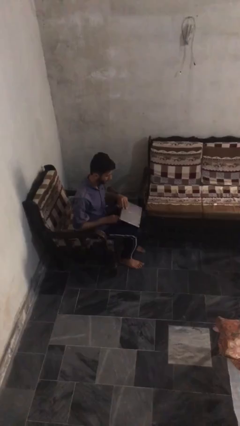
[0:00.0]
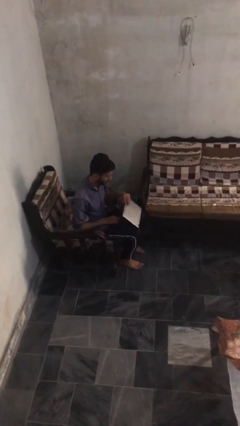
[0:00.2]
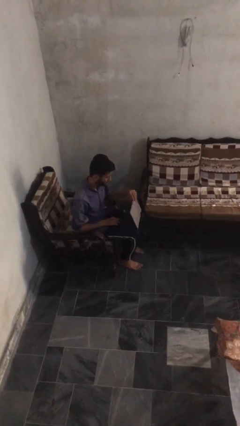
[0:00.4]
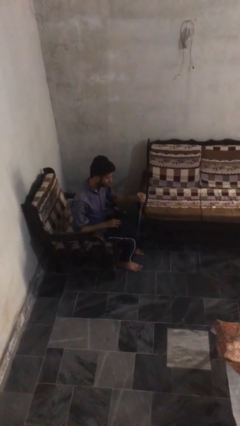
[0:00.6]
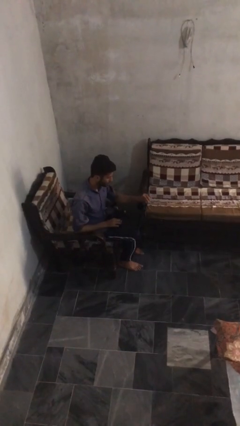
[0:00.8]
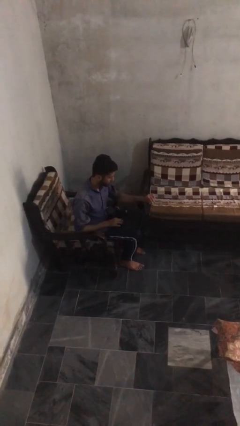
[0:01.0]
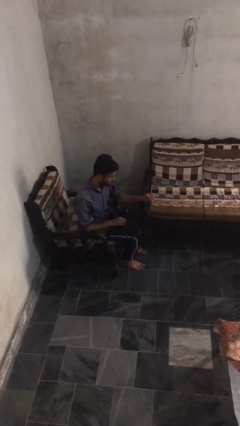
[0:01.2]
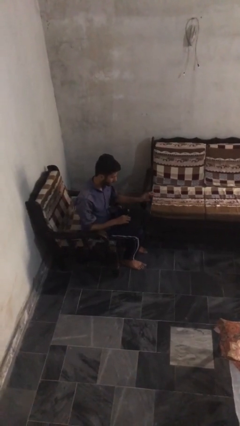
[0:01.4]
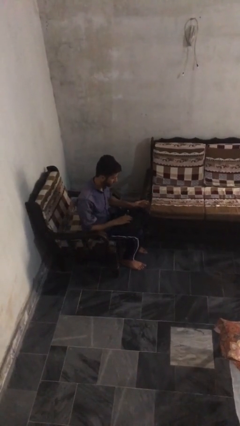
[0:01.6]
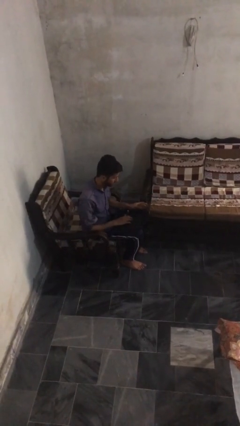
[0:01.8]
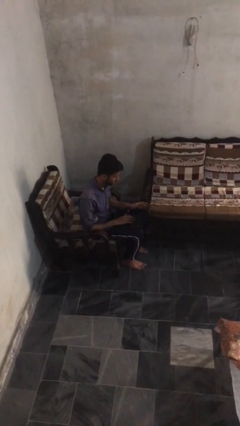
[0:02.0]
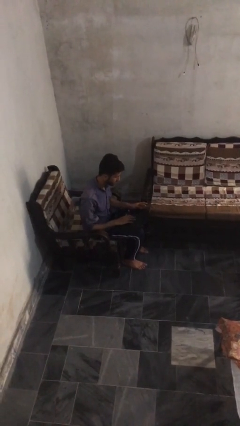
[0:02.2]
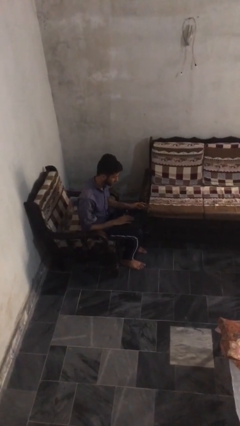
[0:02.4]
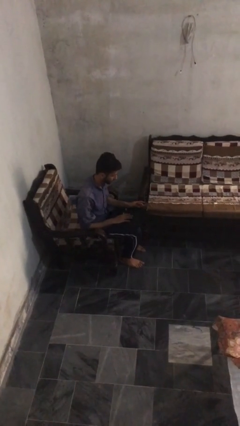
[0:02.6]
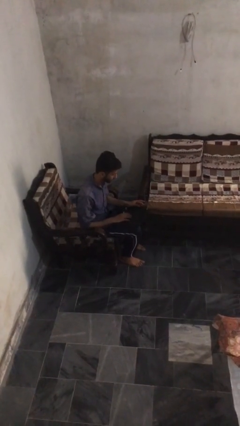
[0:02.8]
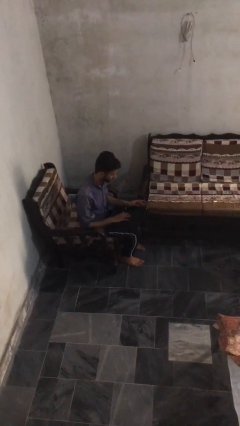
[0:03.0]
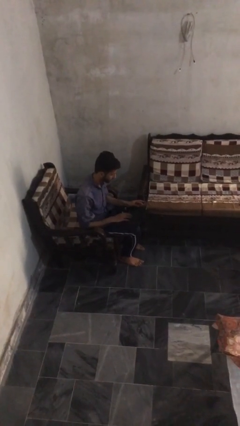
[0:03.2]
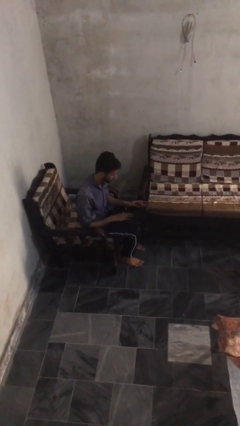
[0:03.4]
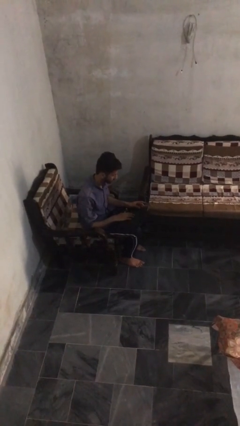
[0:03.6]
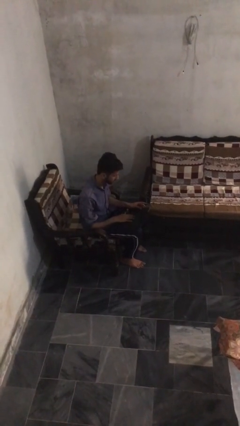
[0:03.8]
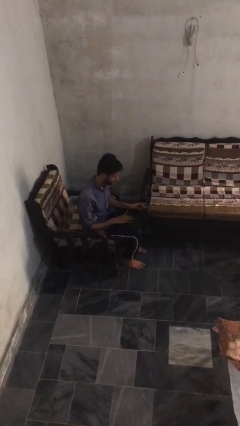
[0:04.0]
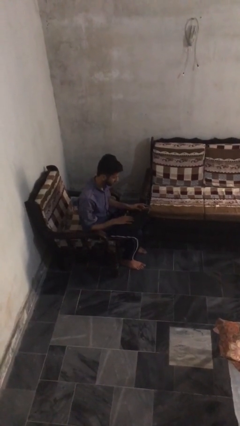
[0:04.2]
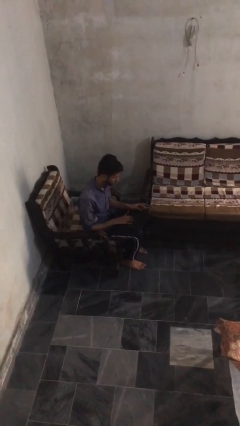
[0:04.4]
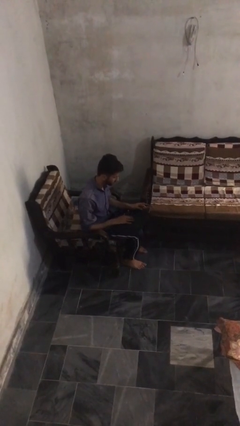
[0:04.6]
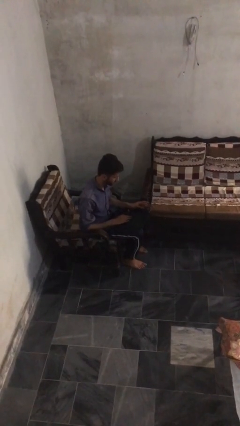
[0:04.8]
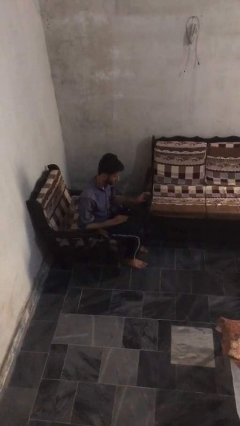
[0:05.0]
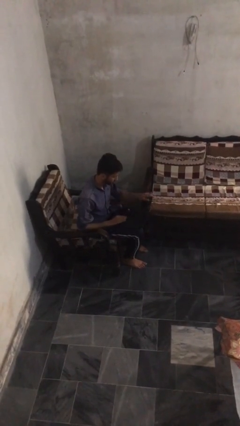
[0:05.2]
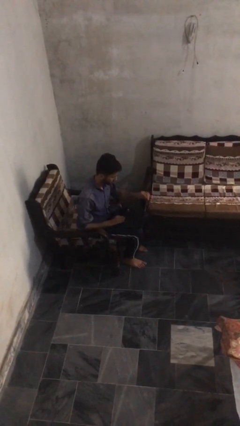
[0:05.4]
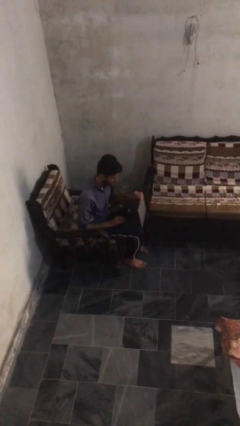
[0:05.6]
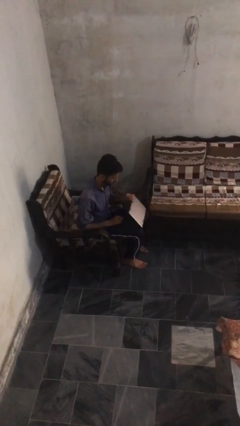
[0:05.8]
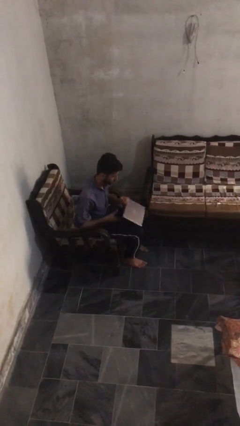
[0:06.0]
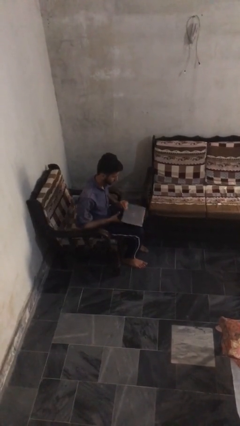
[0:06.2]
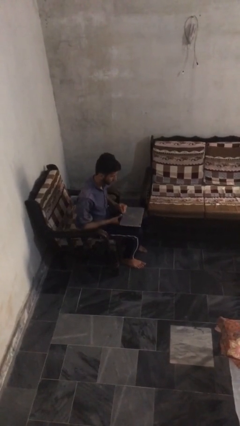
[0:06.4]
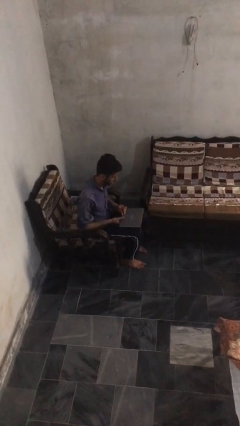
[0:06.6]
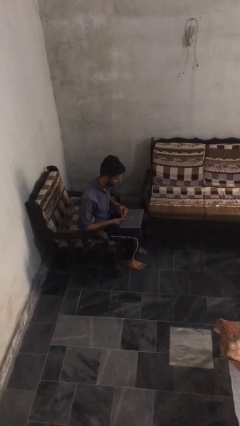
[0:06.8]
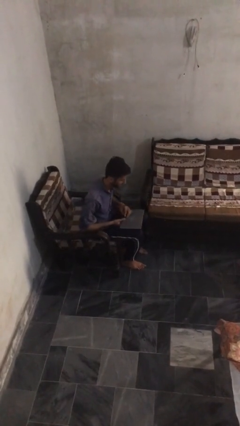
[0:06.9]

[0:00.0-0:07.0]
person interacts with laptop

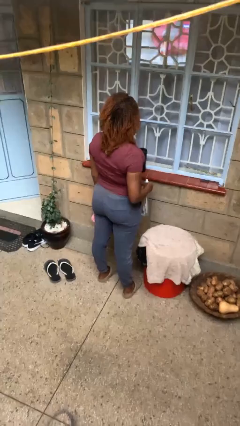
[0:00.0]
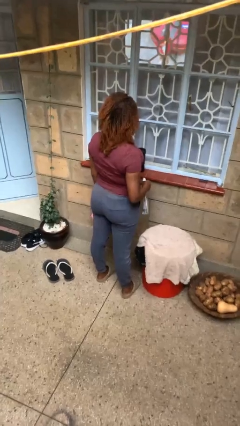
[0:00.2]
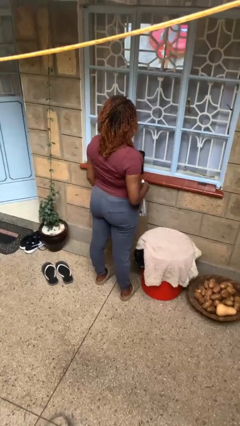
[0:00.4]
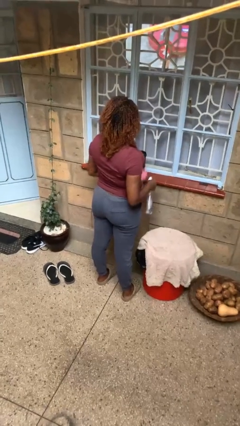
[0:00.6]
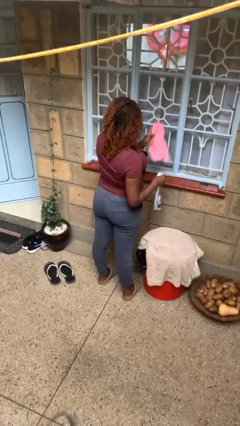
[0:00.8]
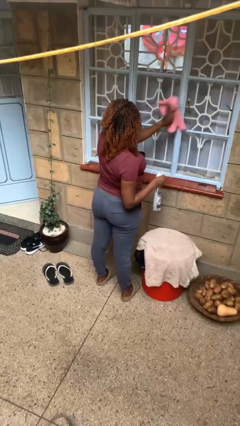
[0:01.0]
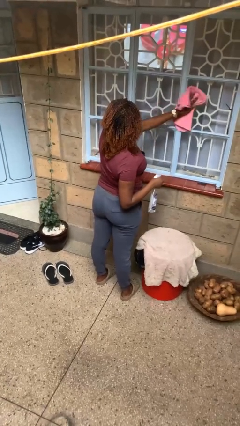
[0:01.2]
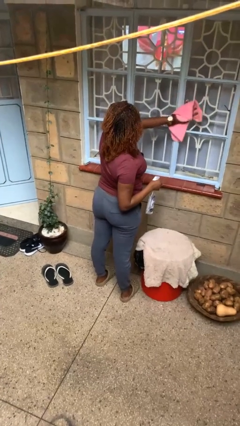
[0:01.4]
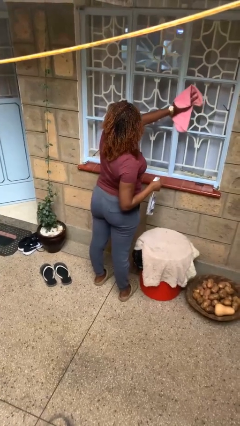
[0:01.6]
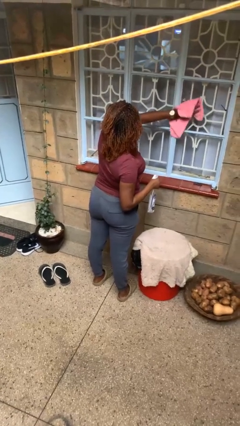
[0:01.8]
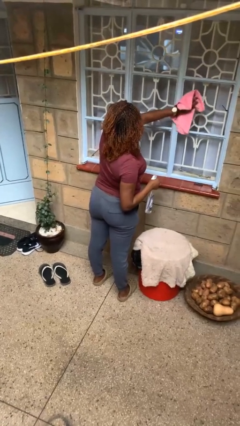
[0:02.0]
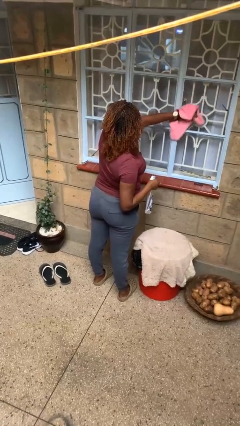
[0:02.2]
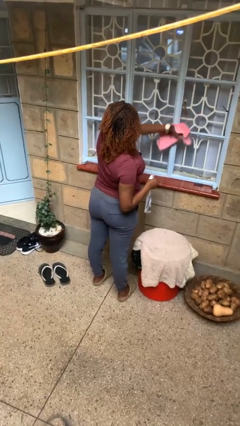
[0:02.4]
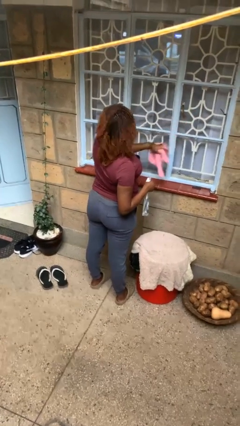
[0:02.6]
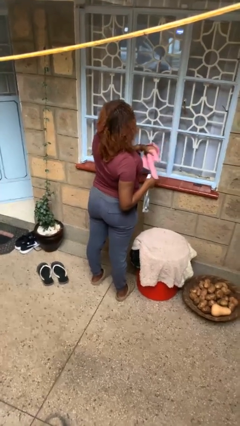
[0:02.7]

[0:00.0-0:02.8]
person washes window

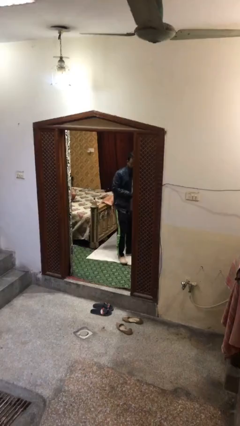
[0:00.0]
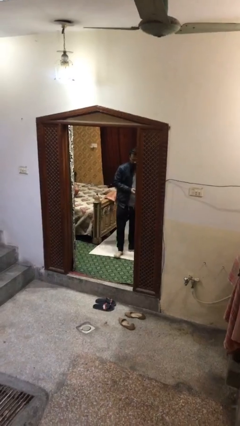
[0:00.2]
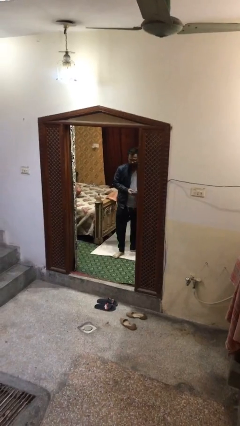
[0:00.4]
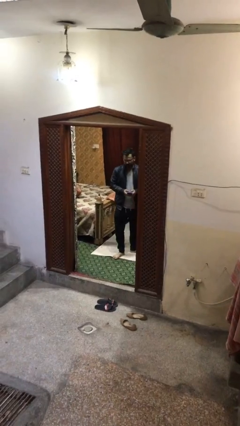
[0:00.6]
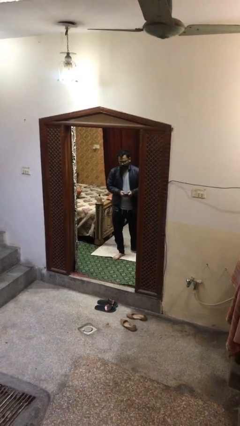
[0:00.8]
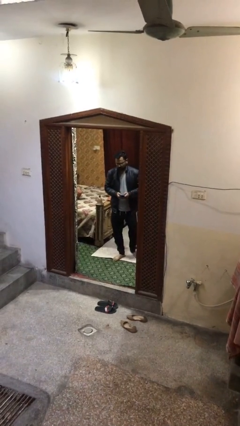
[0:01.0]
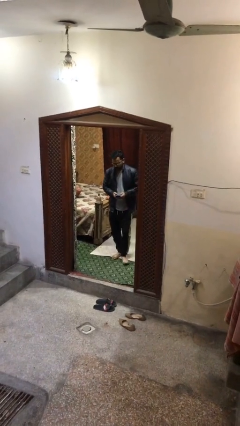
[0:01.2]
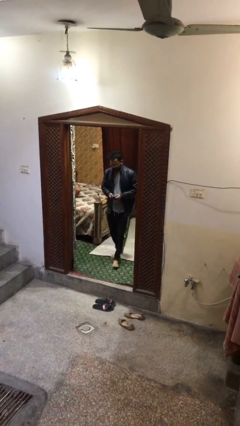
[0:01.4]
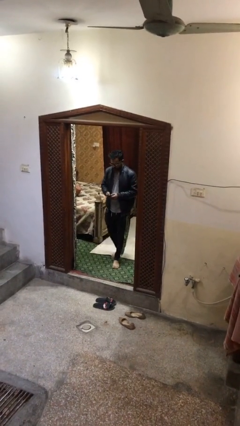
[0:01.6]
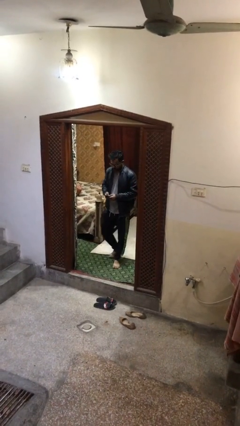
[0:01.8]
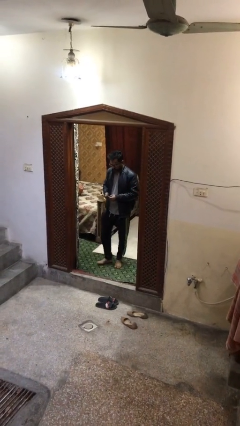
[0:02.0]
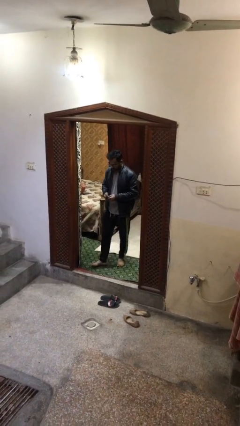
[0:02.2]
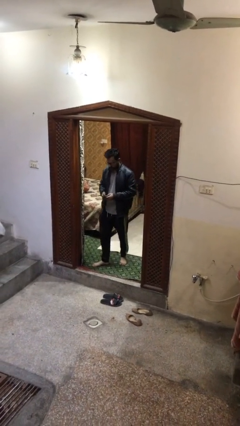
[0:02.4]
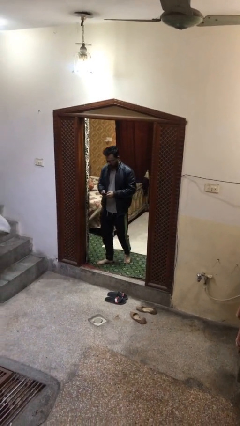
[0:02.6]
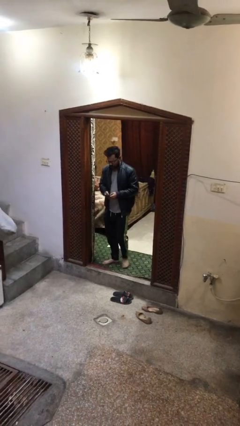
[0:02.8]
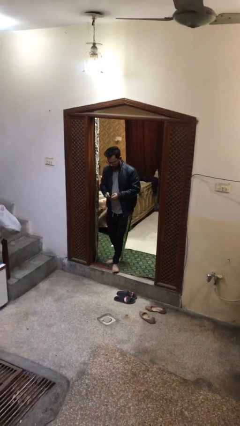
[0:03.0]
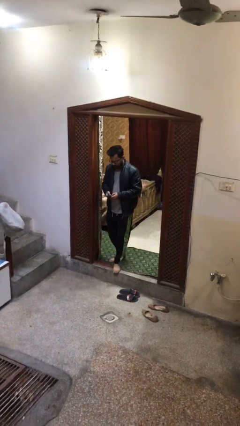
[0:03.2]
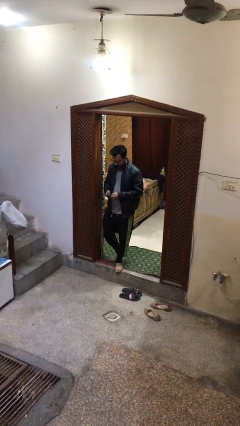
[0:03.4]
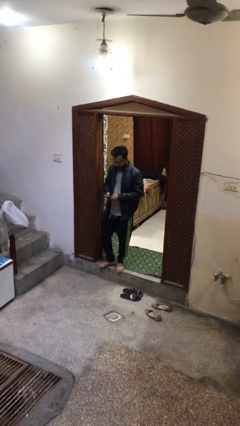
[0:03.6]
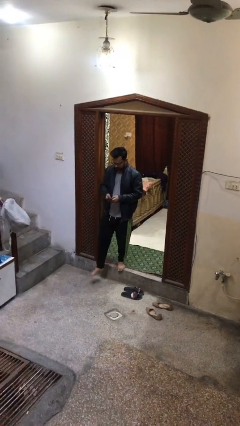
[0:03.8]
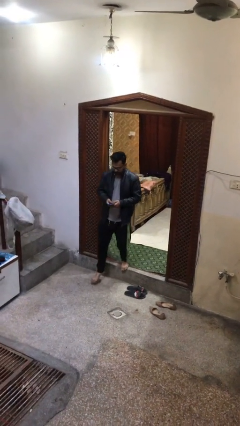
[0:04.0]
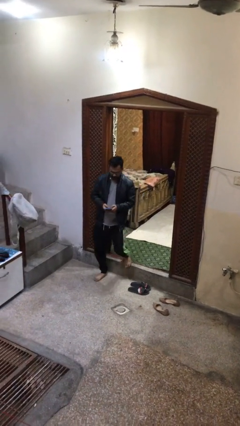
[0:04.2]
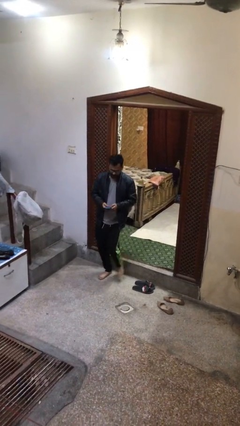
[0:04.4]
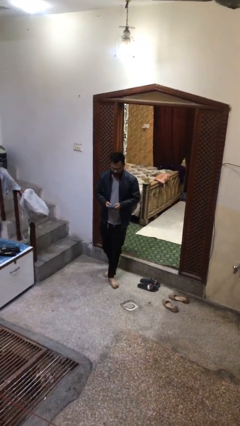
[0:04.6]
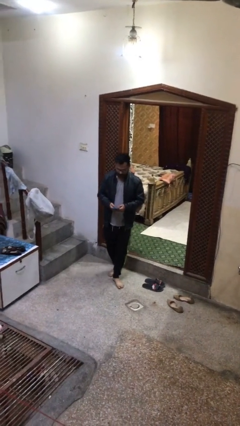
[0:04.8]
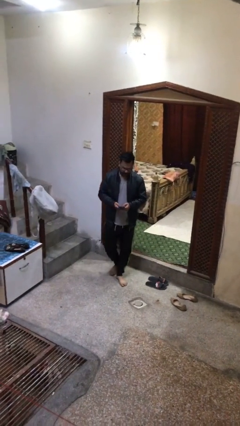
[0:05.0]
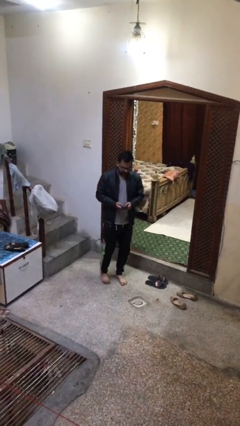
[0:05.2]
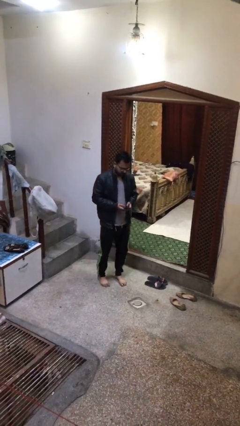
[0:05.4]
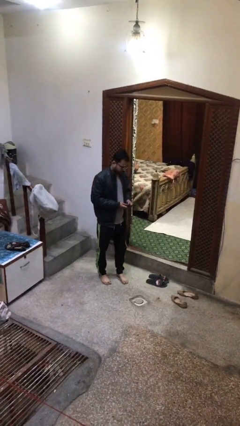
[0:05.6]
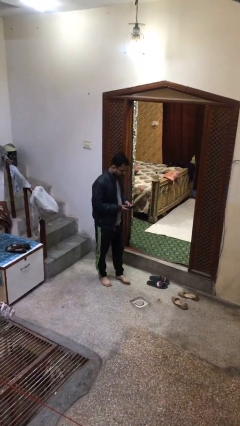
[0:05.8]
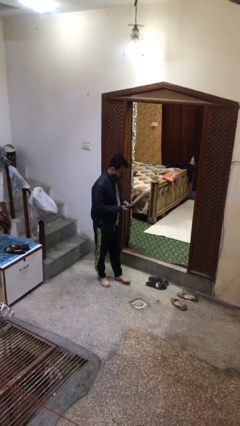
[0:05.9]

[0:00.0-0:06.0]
person enters scene through structure

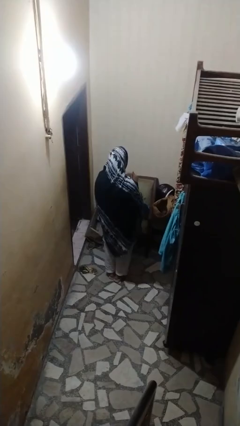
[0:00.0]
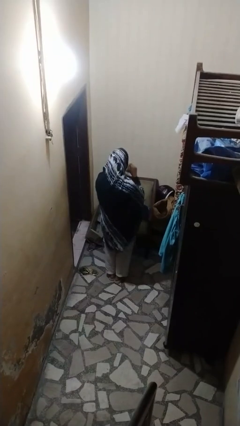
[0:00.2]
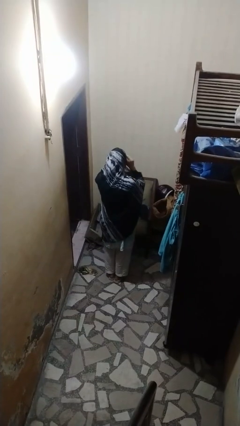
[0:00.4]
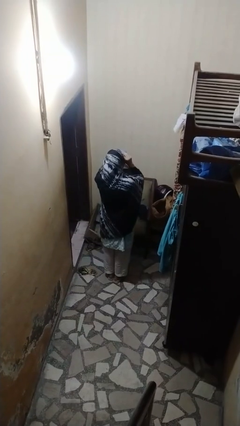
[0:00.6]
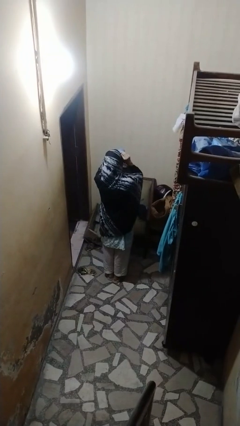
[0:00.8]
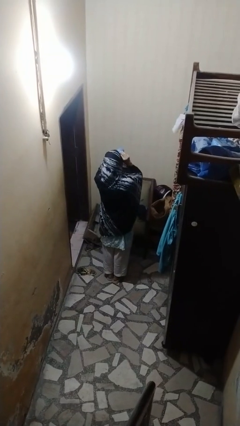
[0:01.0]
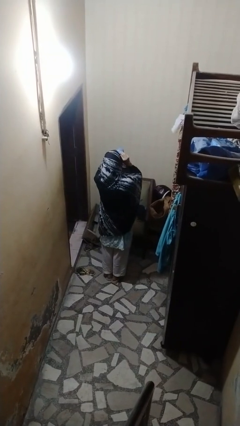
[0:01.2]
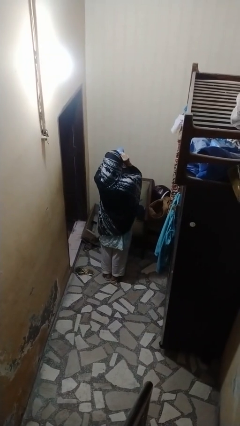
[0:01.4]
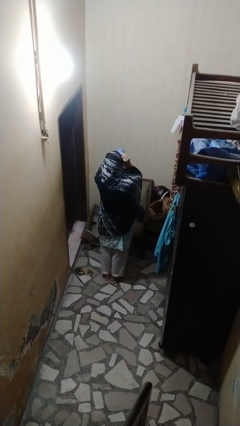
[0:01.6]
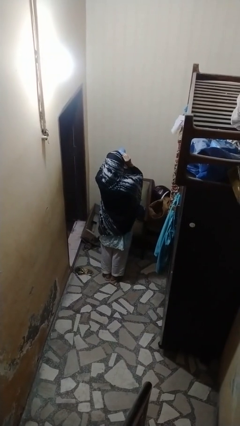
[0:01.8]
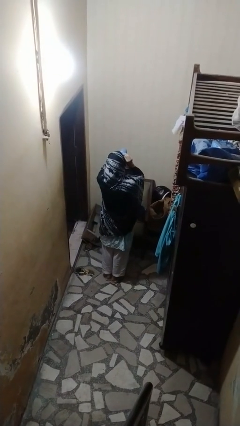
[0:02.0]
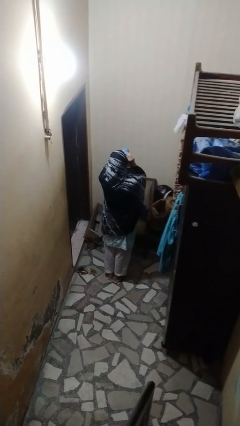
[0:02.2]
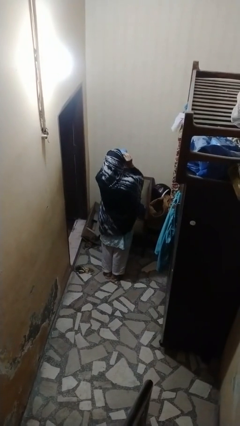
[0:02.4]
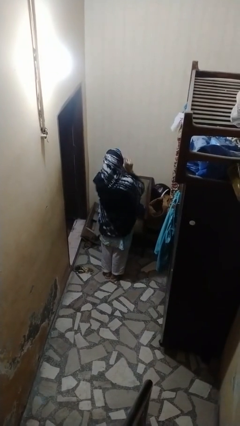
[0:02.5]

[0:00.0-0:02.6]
person drinks from mug
